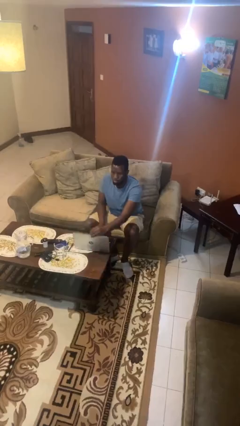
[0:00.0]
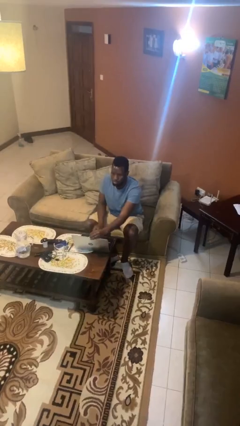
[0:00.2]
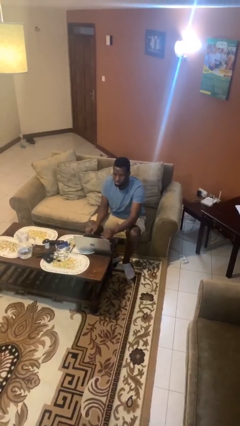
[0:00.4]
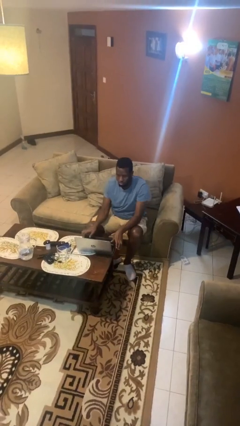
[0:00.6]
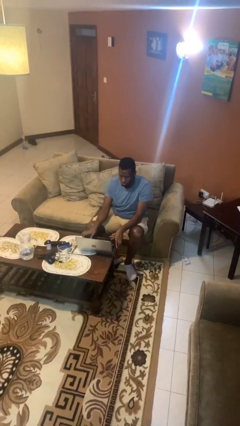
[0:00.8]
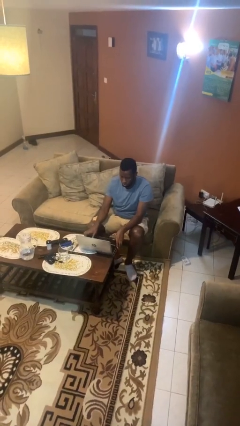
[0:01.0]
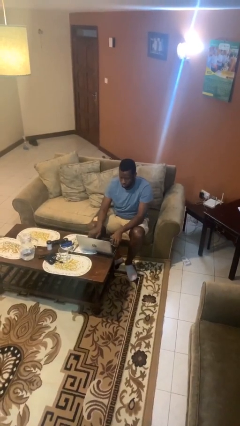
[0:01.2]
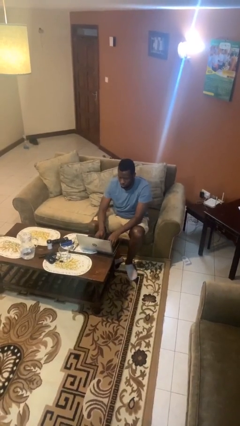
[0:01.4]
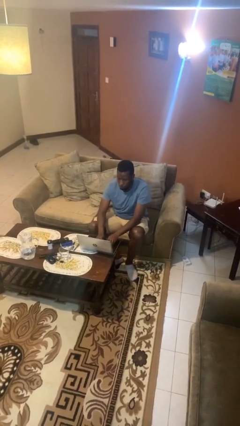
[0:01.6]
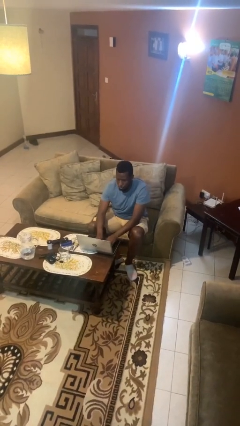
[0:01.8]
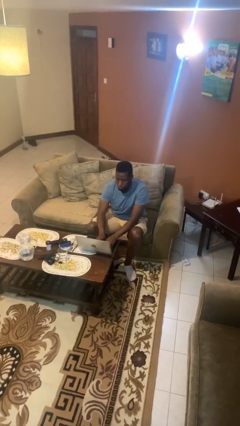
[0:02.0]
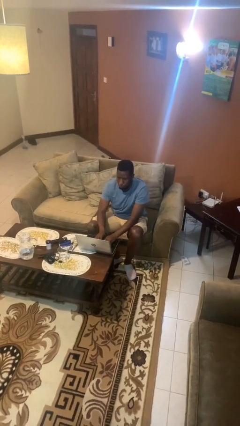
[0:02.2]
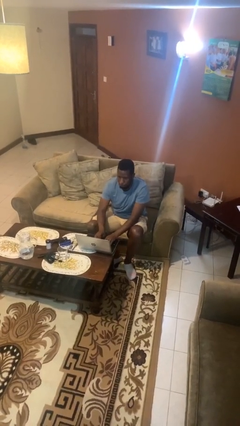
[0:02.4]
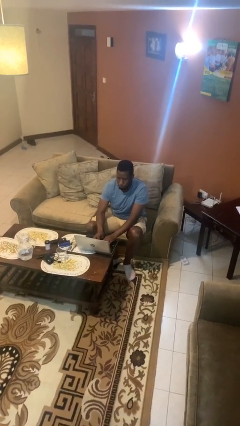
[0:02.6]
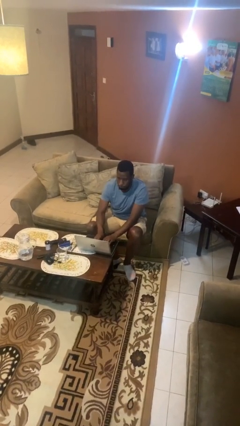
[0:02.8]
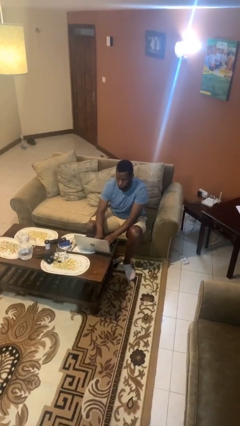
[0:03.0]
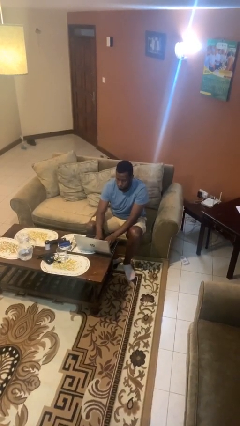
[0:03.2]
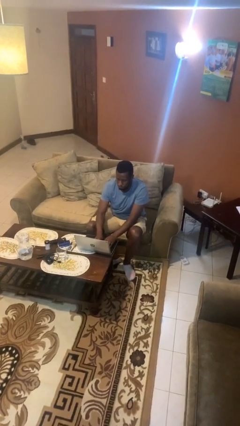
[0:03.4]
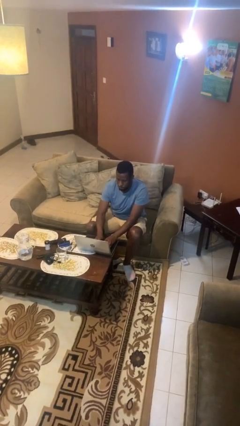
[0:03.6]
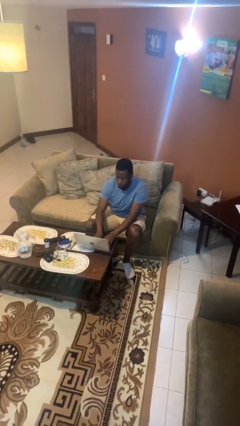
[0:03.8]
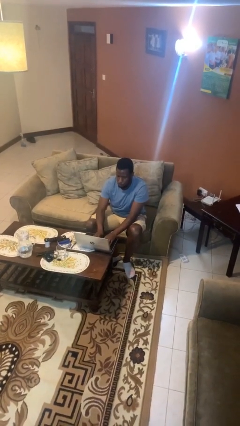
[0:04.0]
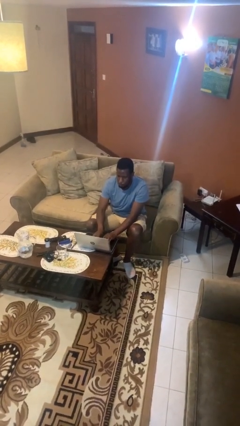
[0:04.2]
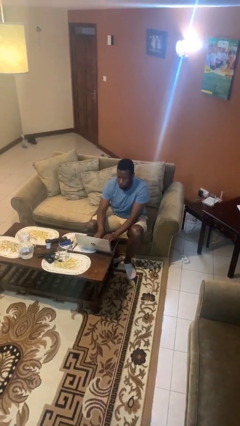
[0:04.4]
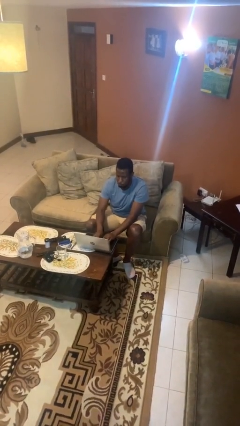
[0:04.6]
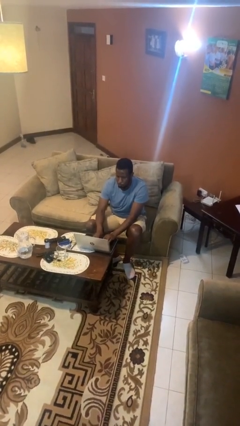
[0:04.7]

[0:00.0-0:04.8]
person interacts with laptop

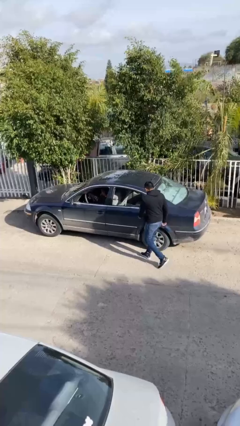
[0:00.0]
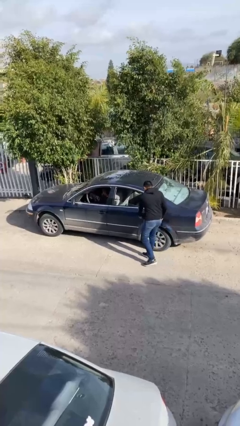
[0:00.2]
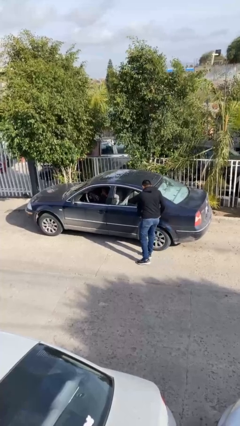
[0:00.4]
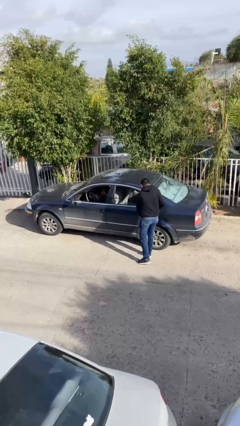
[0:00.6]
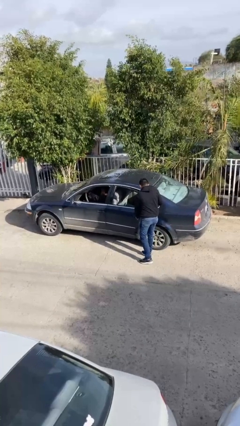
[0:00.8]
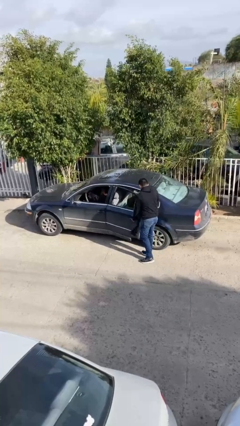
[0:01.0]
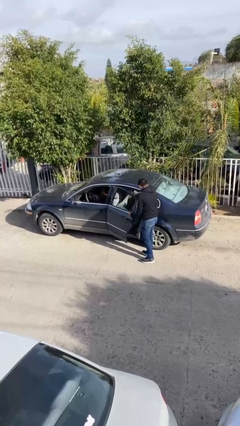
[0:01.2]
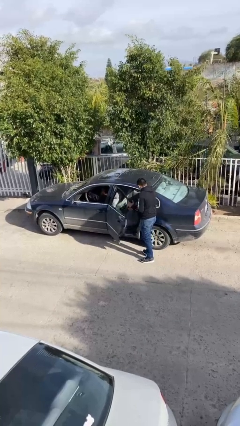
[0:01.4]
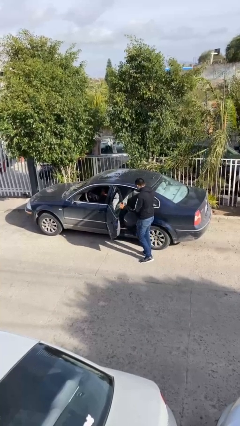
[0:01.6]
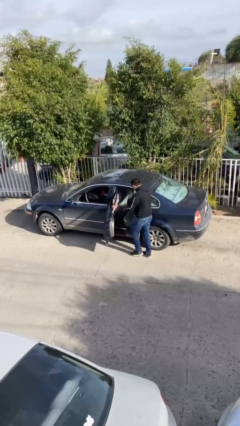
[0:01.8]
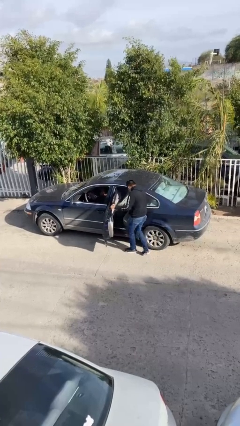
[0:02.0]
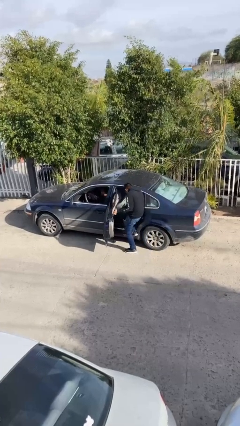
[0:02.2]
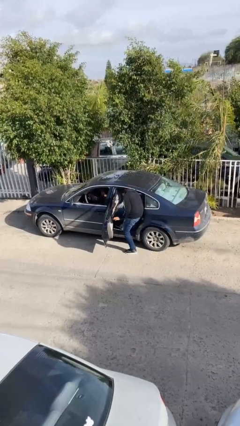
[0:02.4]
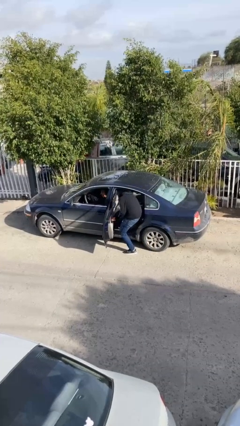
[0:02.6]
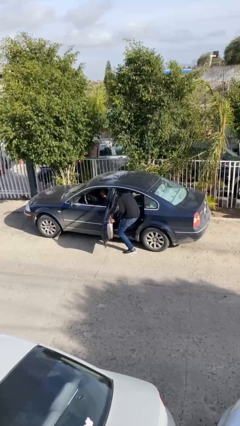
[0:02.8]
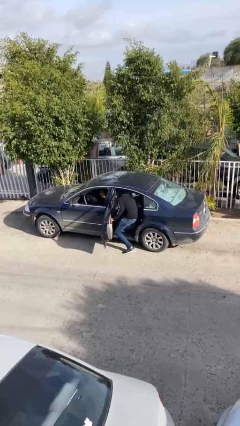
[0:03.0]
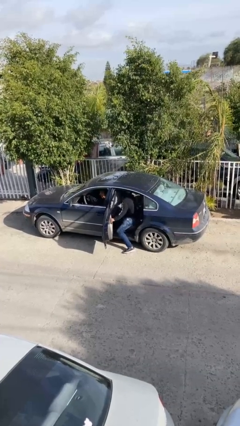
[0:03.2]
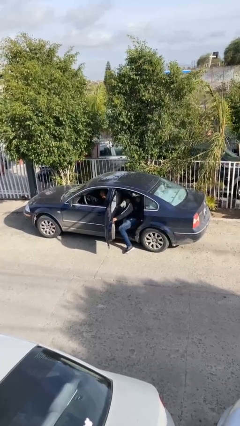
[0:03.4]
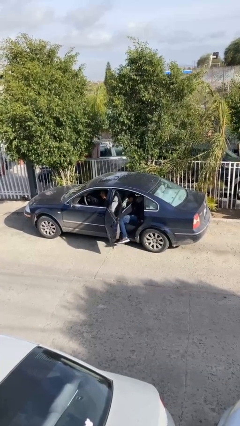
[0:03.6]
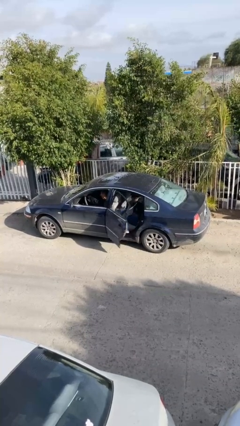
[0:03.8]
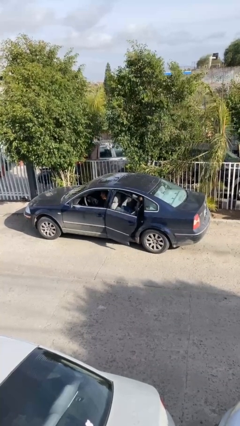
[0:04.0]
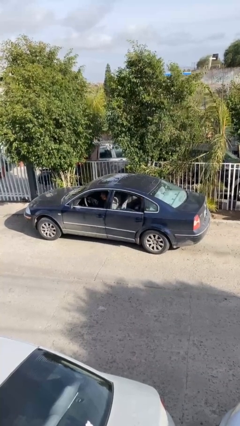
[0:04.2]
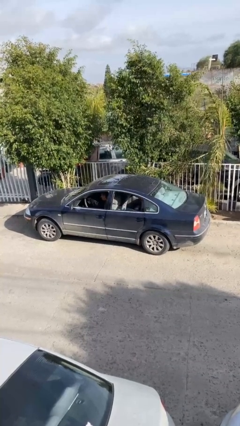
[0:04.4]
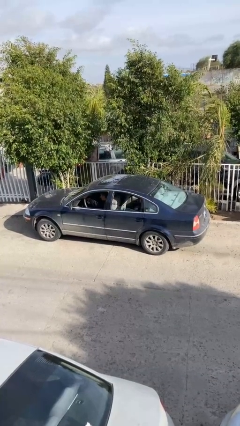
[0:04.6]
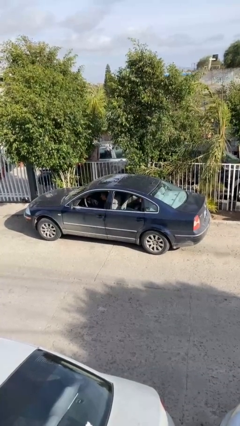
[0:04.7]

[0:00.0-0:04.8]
car picks up person

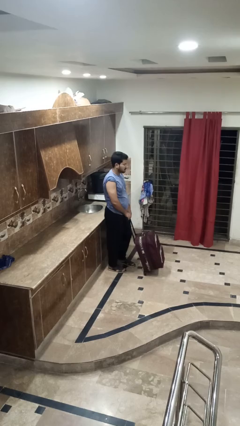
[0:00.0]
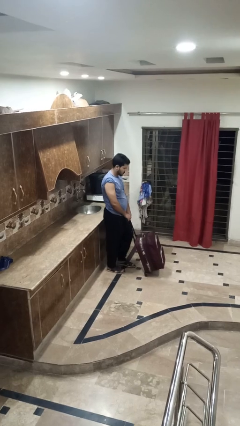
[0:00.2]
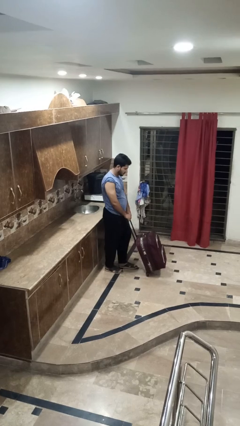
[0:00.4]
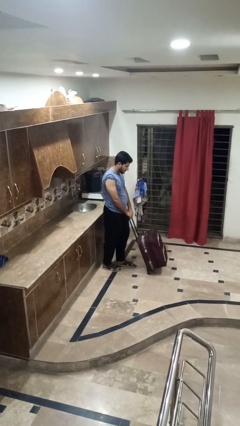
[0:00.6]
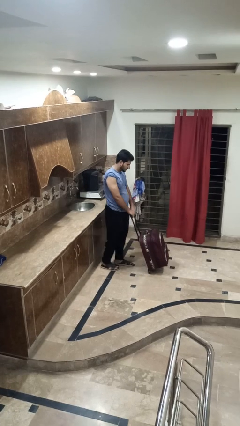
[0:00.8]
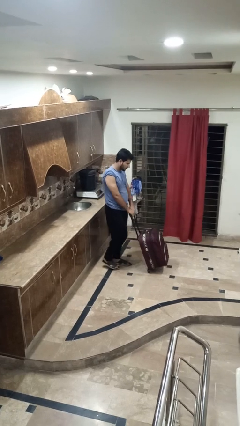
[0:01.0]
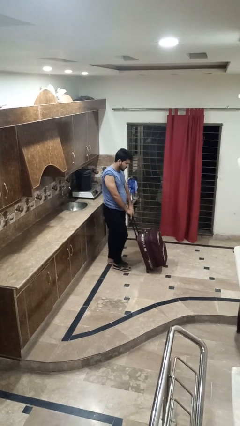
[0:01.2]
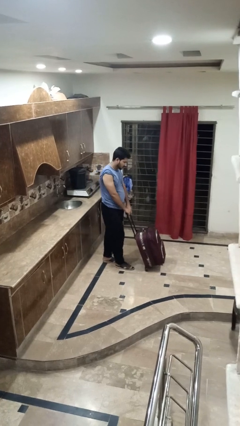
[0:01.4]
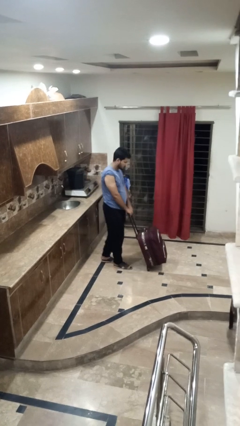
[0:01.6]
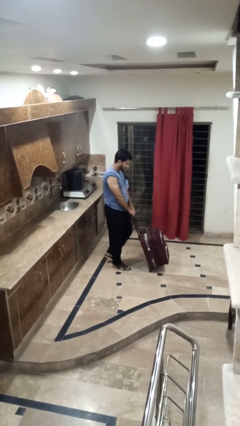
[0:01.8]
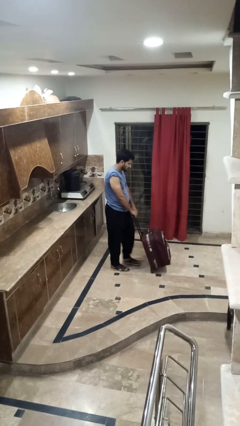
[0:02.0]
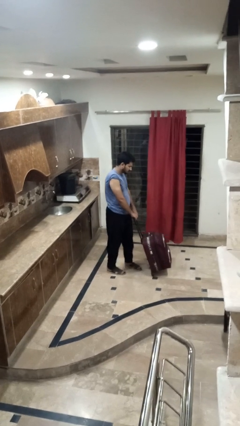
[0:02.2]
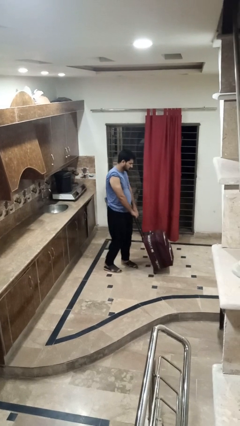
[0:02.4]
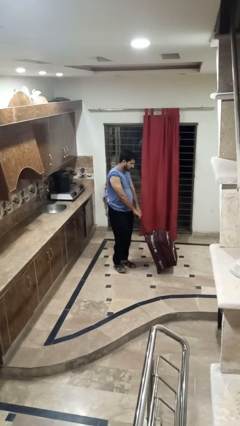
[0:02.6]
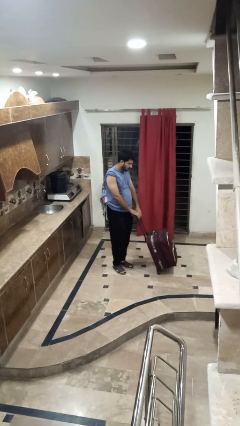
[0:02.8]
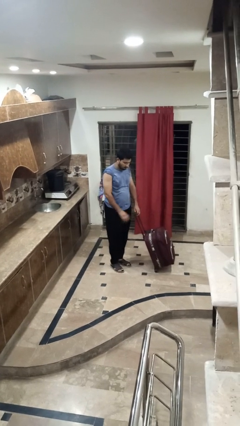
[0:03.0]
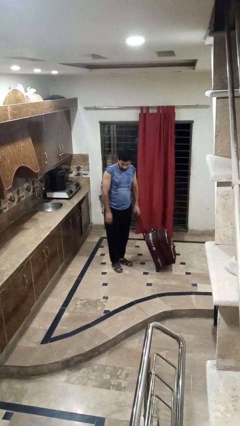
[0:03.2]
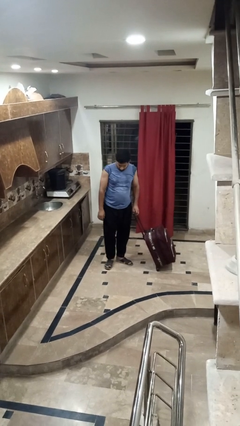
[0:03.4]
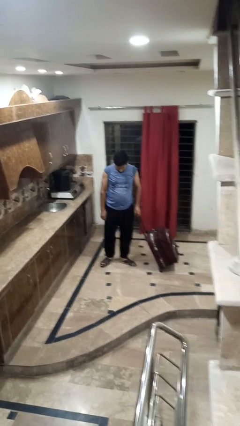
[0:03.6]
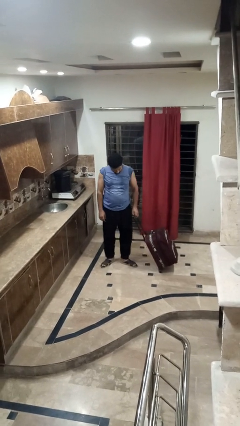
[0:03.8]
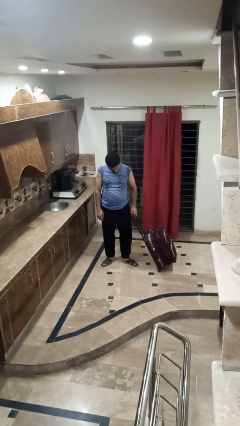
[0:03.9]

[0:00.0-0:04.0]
person pushes wheeled cart

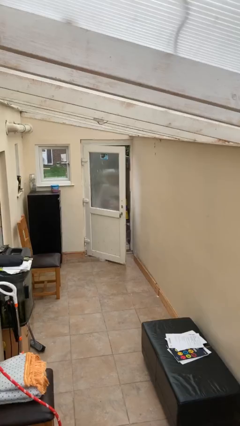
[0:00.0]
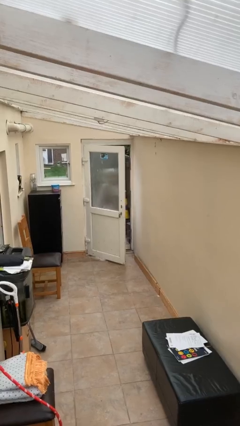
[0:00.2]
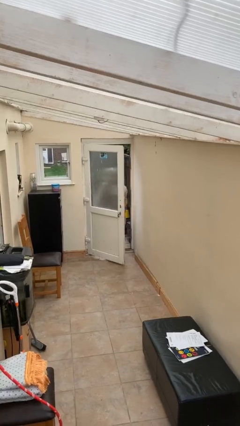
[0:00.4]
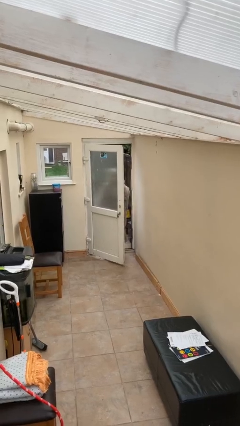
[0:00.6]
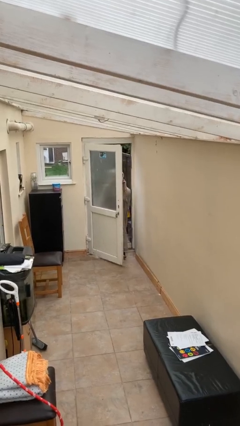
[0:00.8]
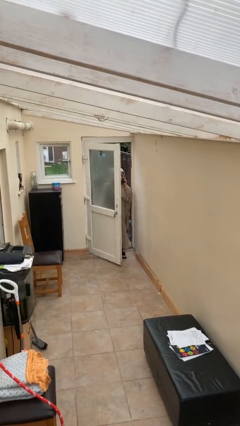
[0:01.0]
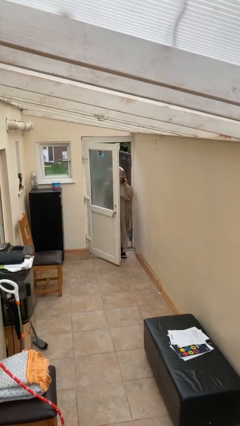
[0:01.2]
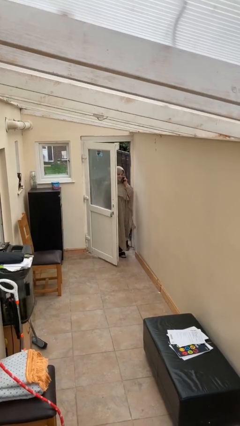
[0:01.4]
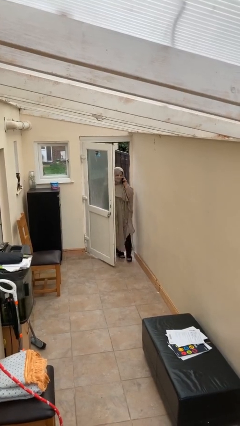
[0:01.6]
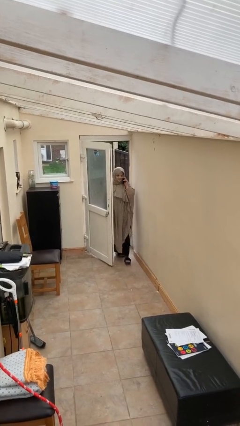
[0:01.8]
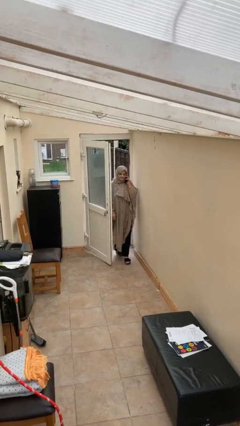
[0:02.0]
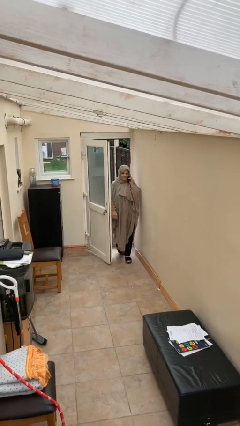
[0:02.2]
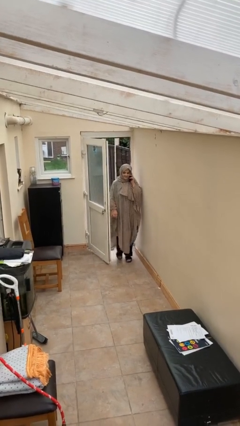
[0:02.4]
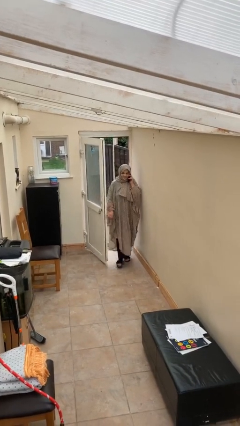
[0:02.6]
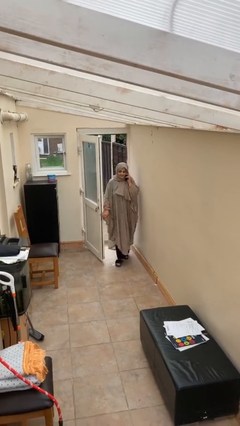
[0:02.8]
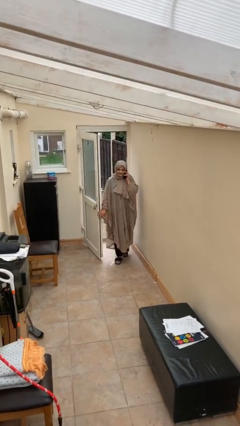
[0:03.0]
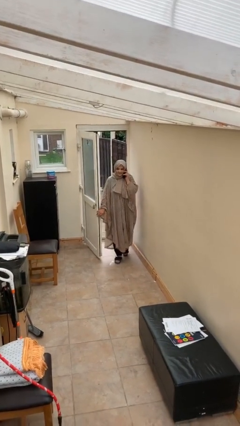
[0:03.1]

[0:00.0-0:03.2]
person enters scene through structure

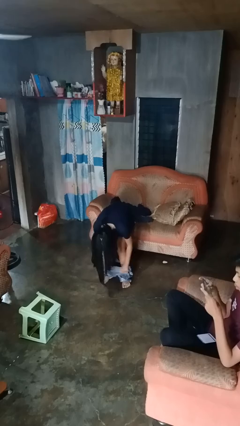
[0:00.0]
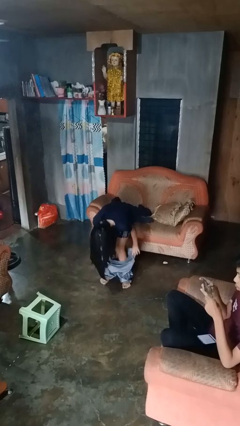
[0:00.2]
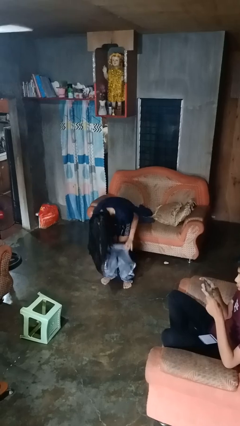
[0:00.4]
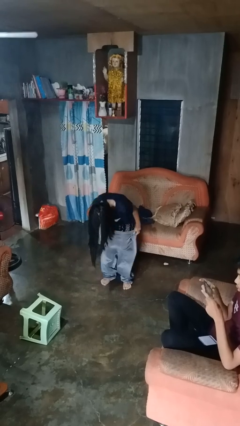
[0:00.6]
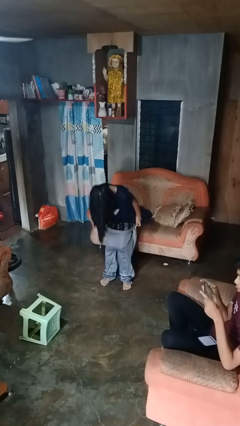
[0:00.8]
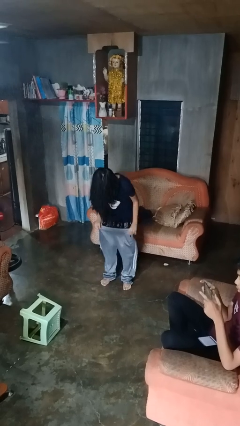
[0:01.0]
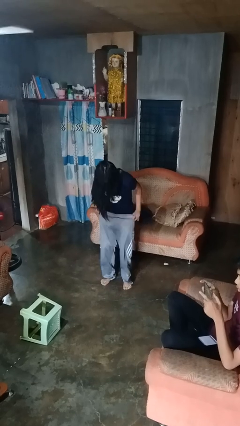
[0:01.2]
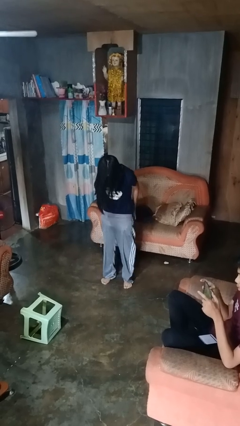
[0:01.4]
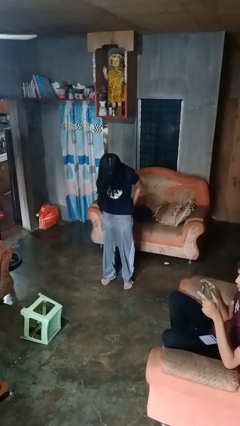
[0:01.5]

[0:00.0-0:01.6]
person puts on pants
